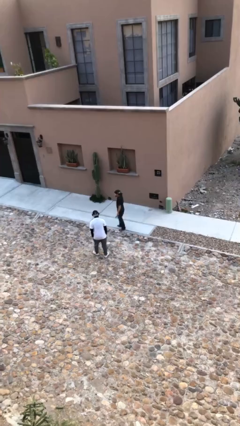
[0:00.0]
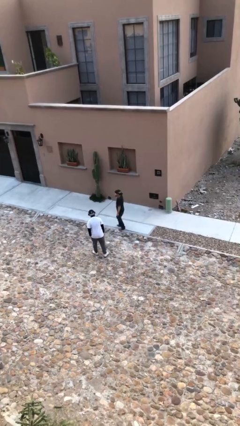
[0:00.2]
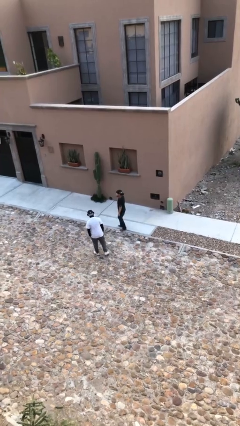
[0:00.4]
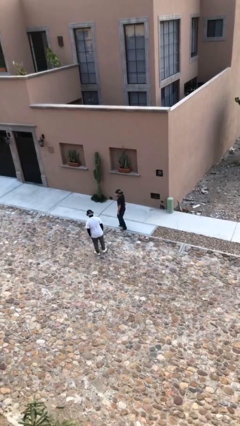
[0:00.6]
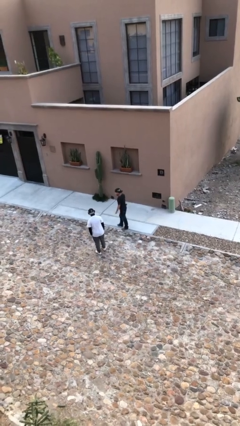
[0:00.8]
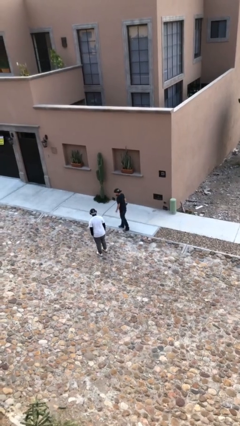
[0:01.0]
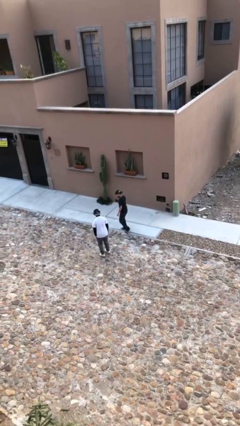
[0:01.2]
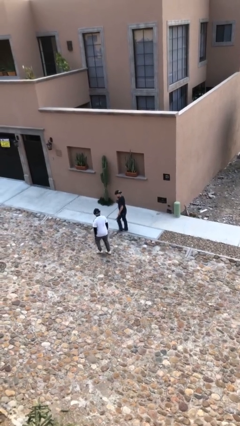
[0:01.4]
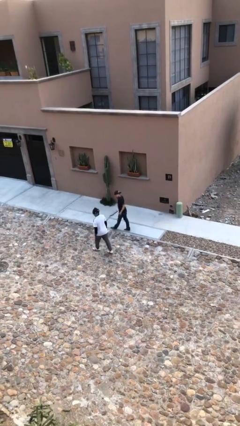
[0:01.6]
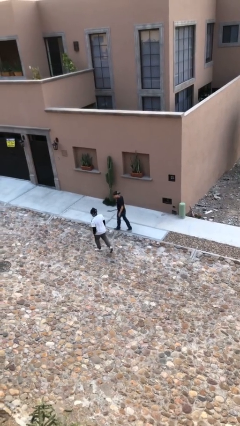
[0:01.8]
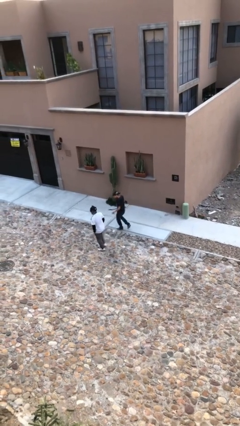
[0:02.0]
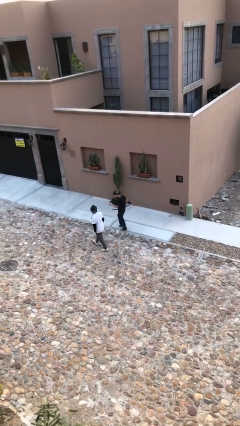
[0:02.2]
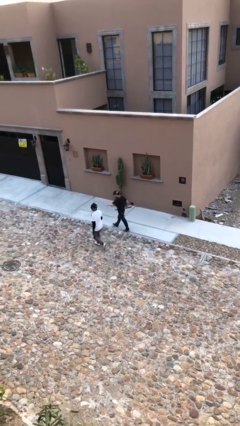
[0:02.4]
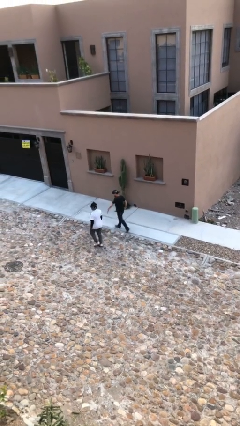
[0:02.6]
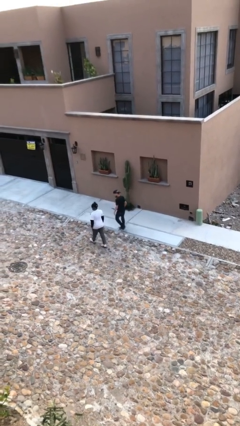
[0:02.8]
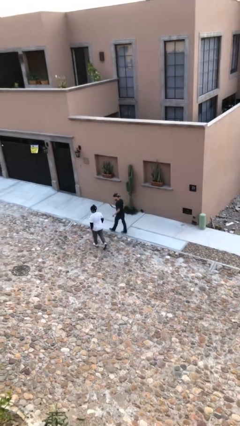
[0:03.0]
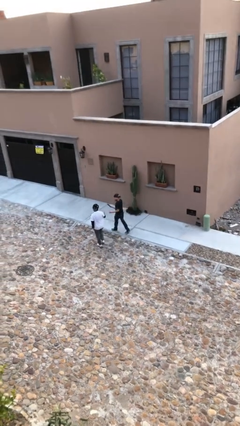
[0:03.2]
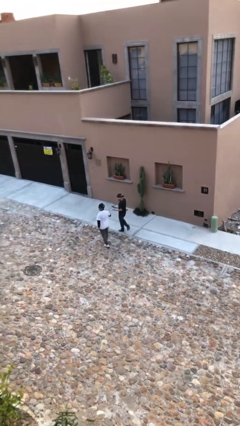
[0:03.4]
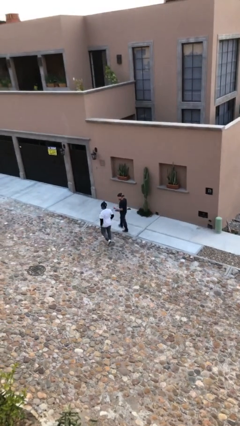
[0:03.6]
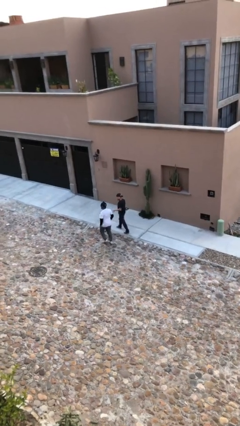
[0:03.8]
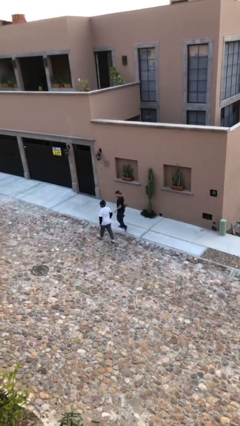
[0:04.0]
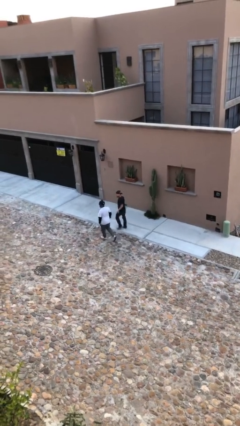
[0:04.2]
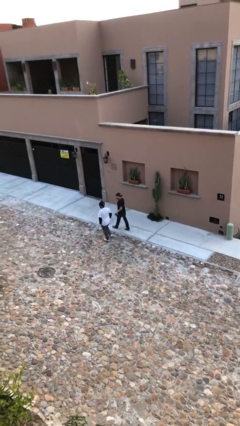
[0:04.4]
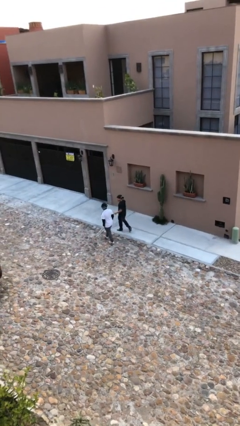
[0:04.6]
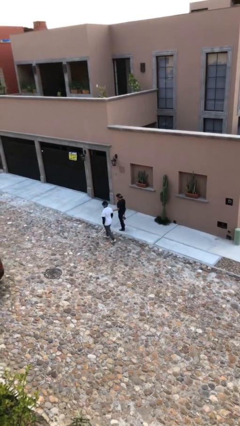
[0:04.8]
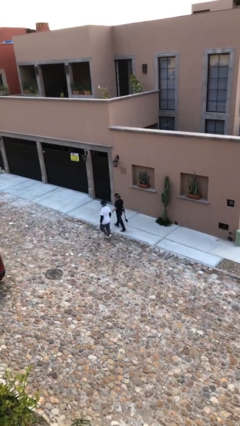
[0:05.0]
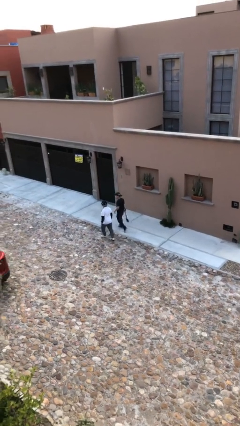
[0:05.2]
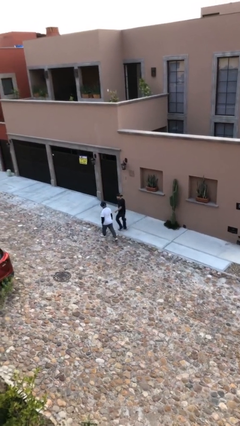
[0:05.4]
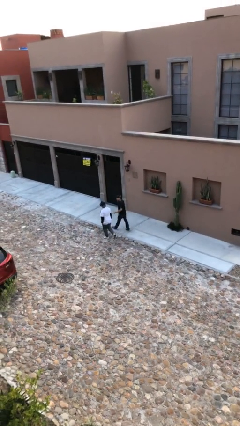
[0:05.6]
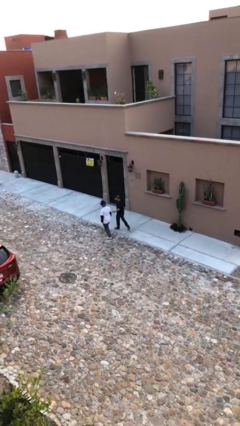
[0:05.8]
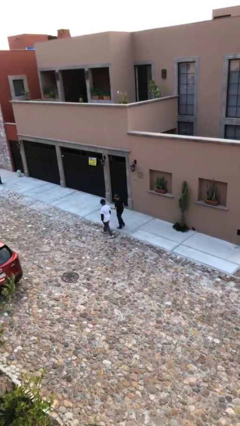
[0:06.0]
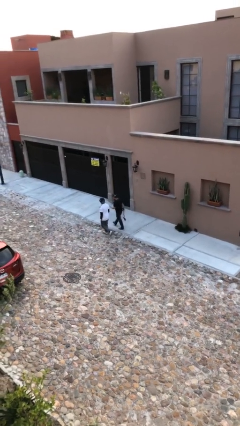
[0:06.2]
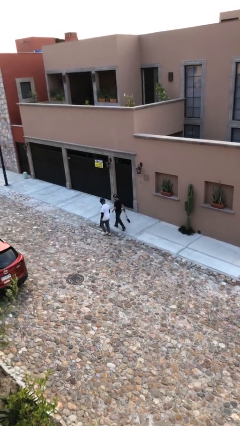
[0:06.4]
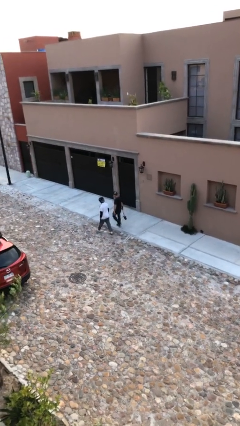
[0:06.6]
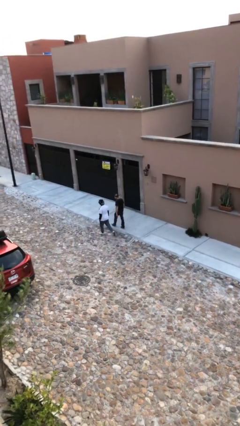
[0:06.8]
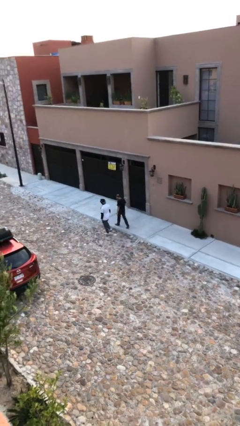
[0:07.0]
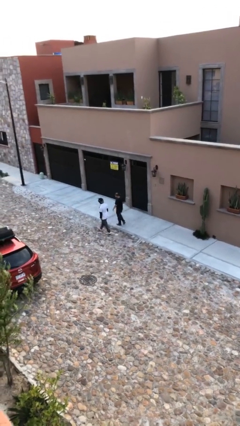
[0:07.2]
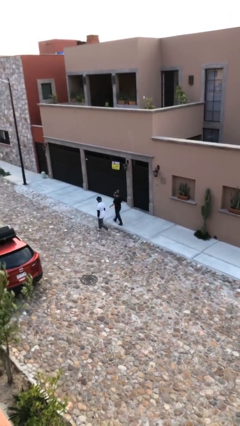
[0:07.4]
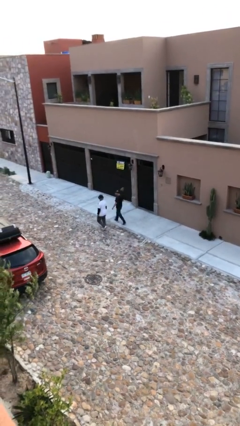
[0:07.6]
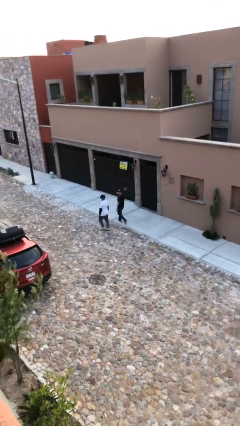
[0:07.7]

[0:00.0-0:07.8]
person talks to person

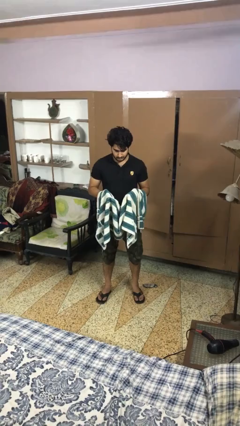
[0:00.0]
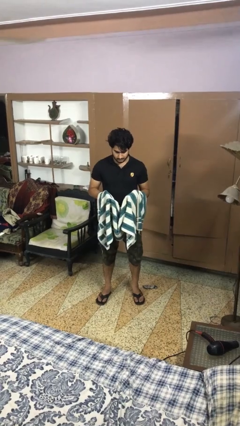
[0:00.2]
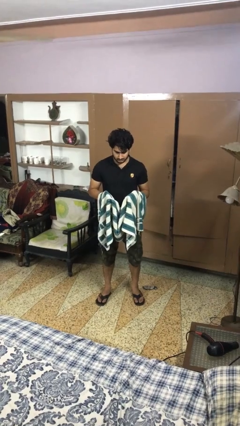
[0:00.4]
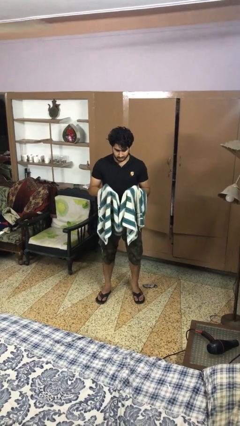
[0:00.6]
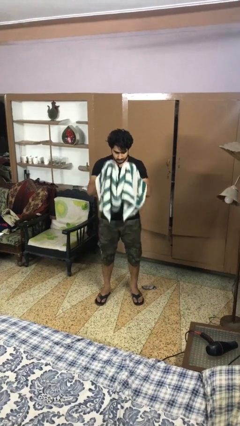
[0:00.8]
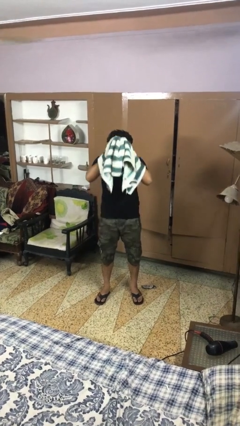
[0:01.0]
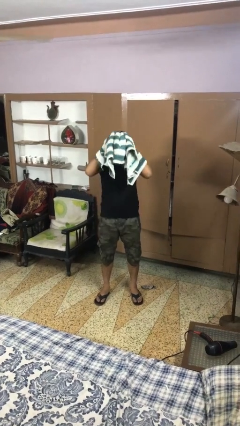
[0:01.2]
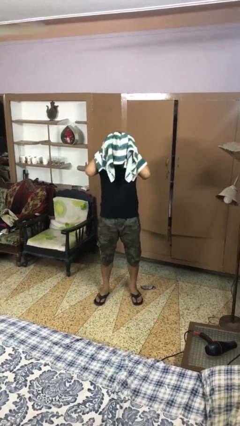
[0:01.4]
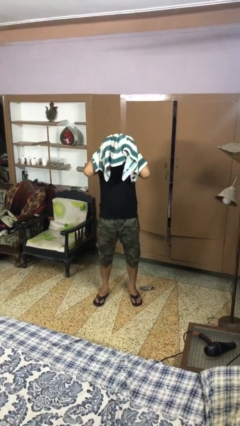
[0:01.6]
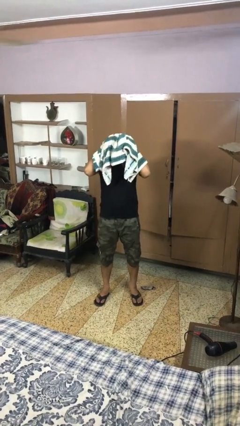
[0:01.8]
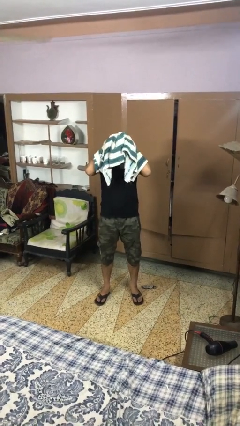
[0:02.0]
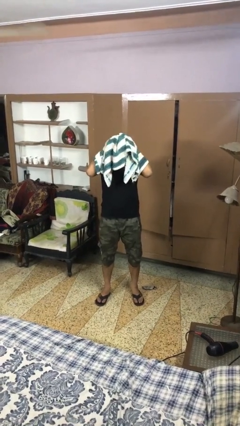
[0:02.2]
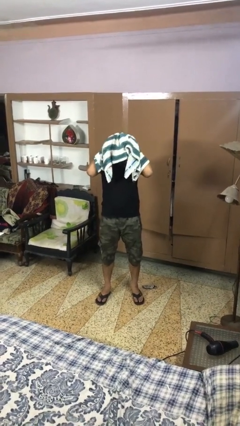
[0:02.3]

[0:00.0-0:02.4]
person dries hair with towel

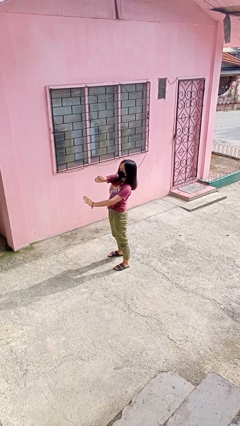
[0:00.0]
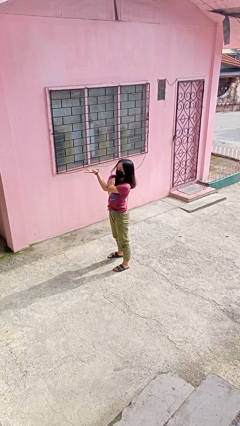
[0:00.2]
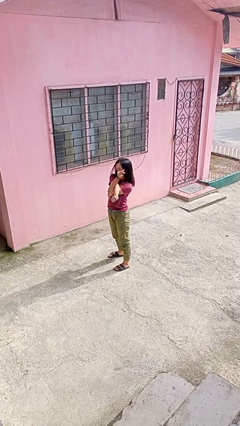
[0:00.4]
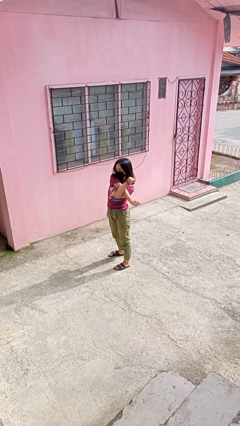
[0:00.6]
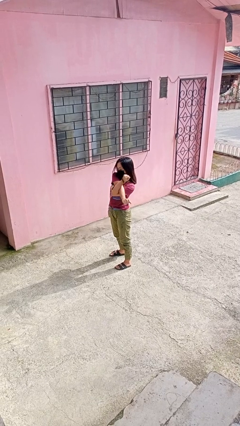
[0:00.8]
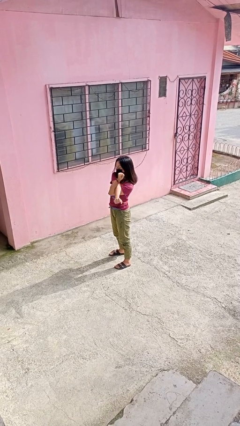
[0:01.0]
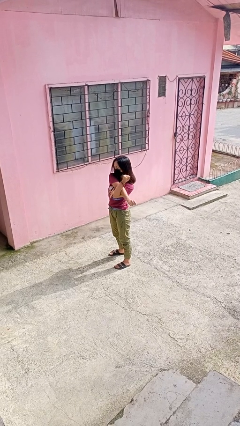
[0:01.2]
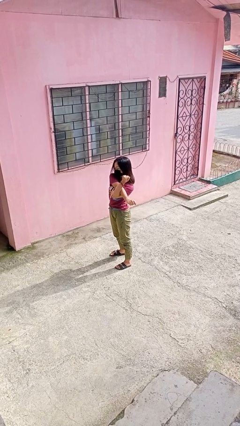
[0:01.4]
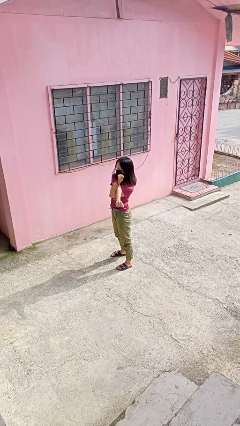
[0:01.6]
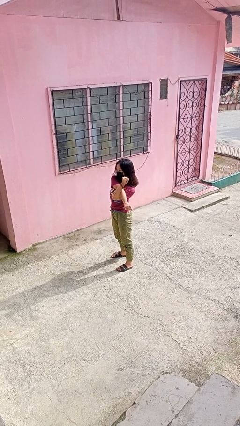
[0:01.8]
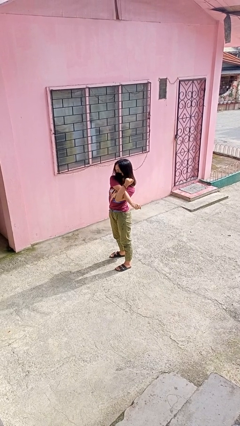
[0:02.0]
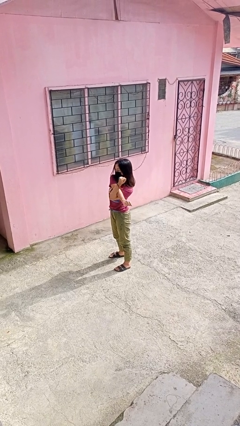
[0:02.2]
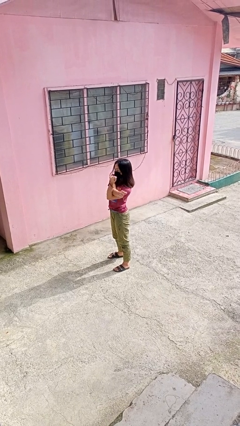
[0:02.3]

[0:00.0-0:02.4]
person stretches arms to side

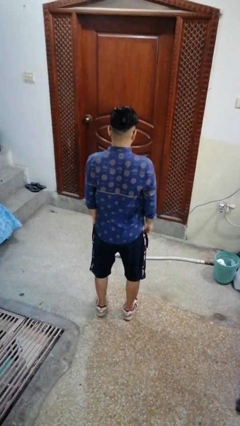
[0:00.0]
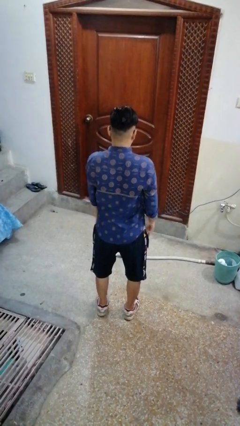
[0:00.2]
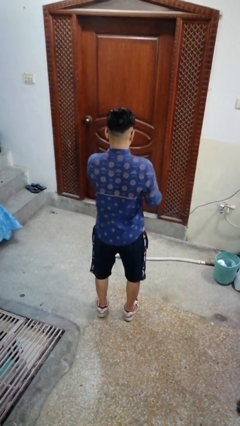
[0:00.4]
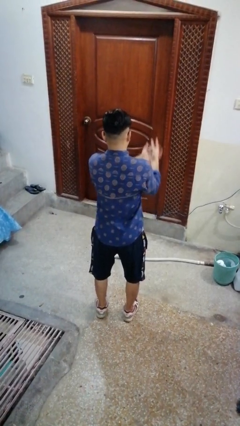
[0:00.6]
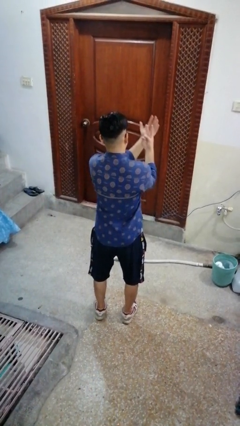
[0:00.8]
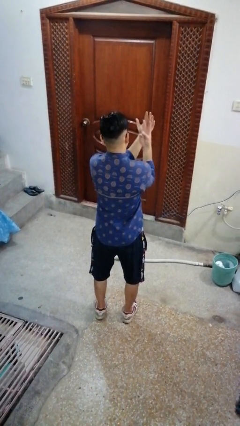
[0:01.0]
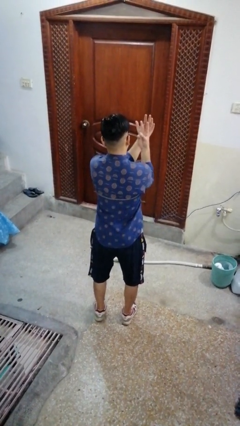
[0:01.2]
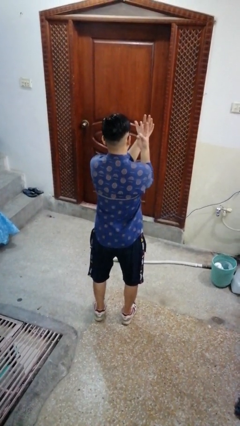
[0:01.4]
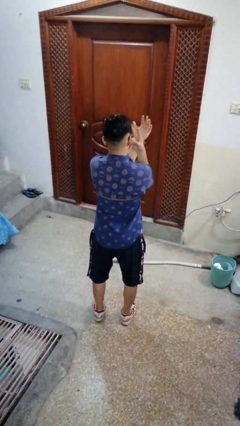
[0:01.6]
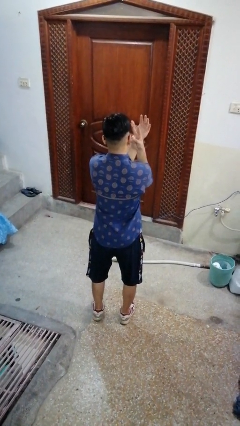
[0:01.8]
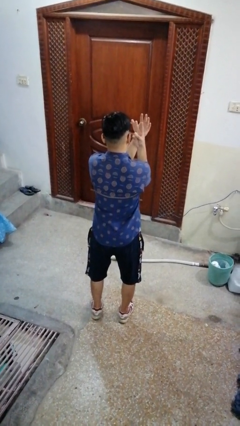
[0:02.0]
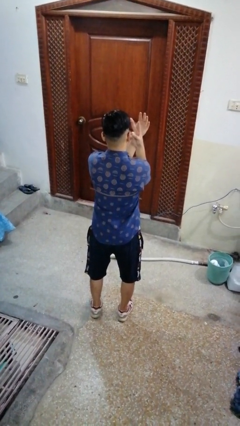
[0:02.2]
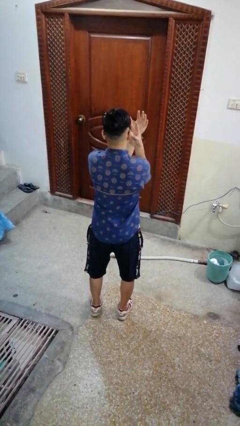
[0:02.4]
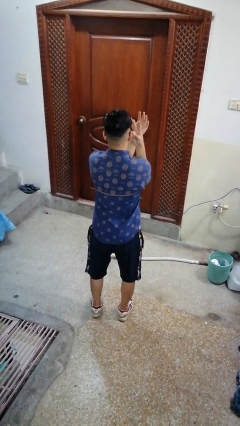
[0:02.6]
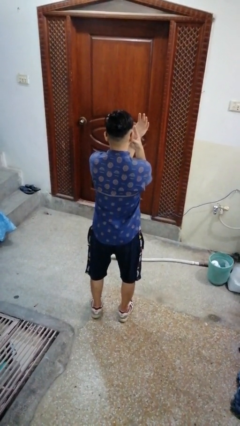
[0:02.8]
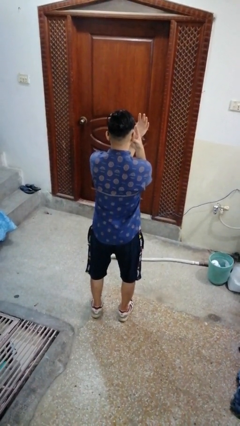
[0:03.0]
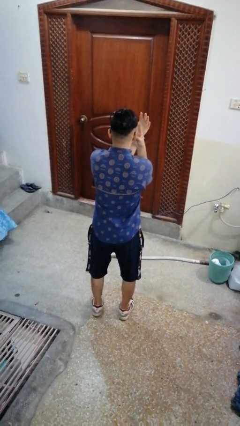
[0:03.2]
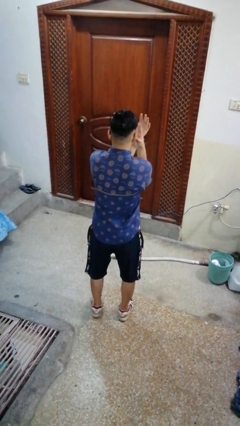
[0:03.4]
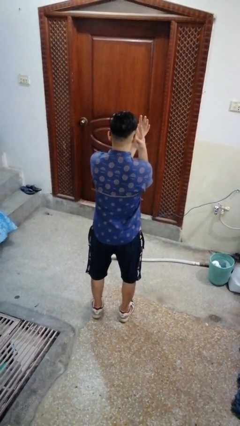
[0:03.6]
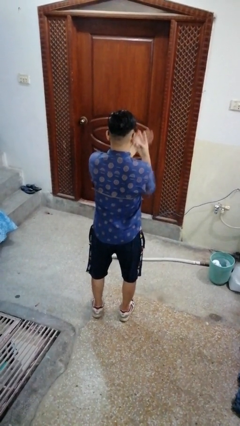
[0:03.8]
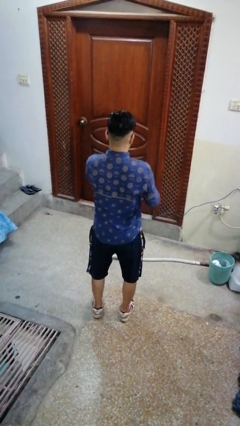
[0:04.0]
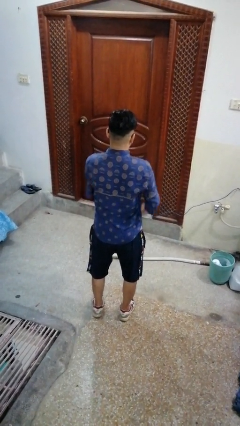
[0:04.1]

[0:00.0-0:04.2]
person gestures watch closely

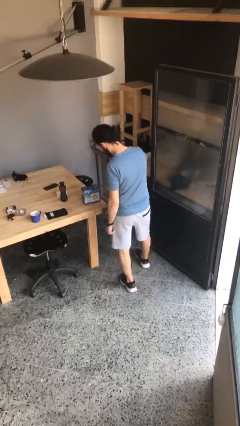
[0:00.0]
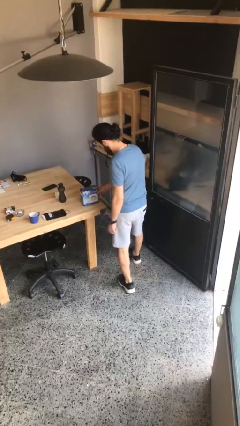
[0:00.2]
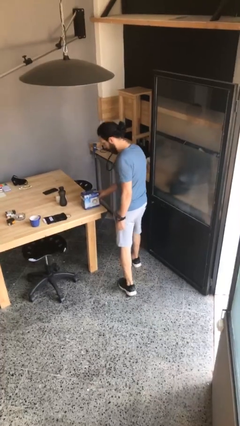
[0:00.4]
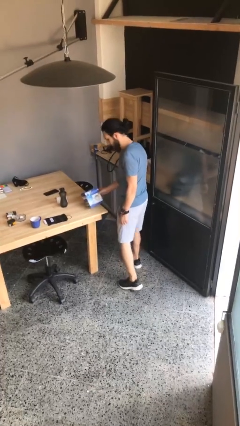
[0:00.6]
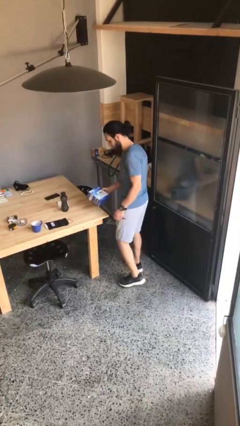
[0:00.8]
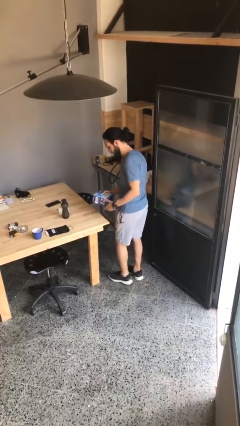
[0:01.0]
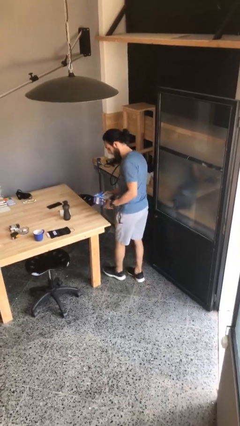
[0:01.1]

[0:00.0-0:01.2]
person picks up object from table
